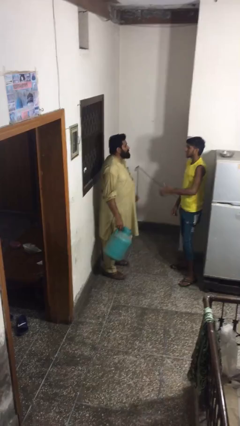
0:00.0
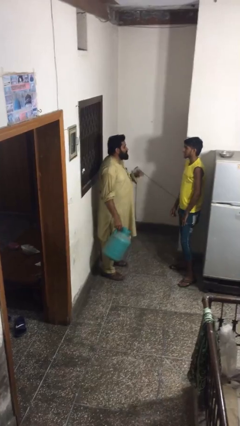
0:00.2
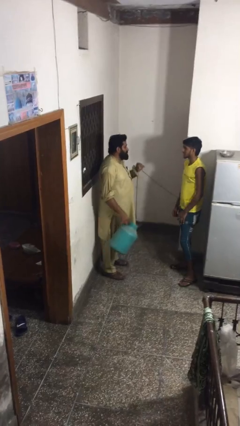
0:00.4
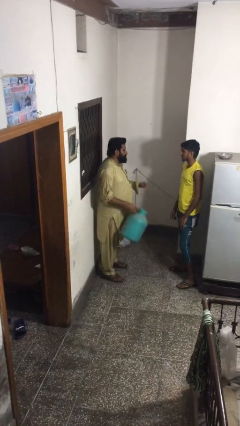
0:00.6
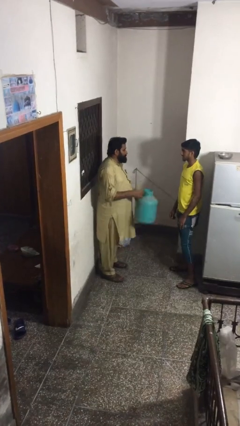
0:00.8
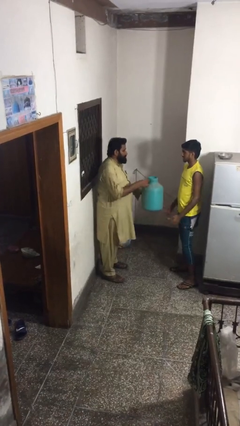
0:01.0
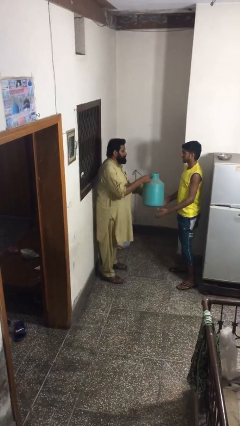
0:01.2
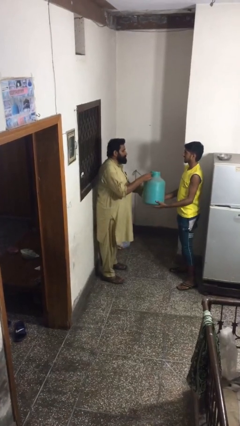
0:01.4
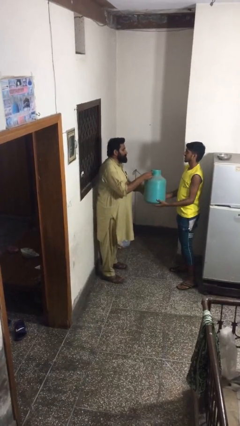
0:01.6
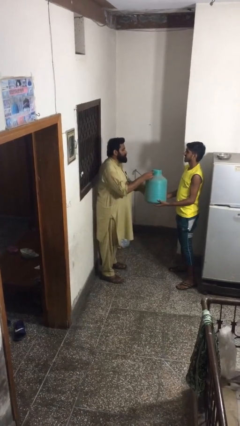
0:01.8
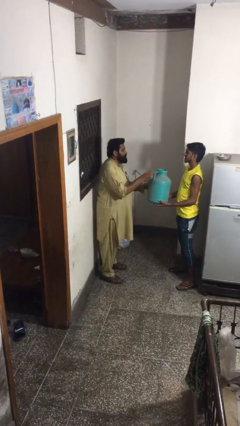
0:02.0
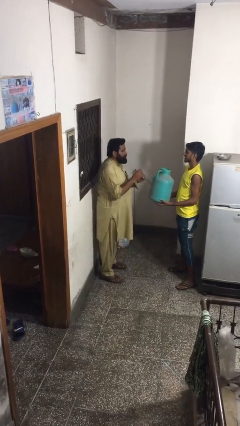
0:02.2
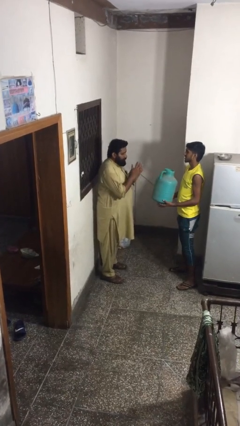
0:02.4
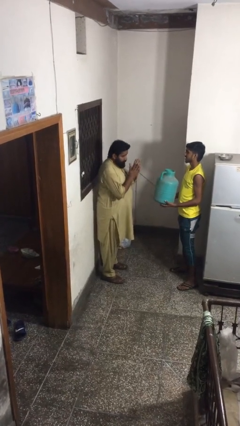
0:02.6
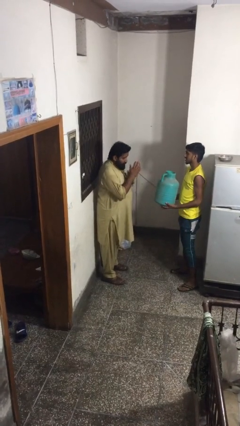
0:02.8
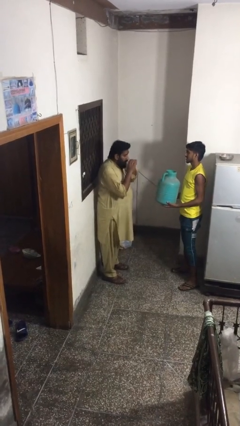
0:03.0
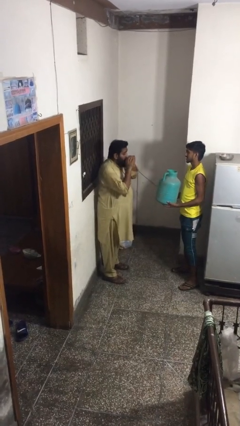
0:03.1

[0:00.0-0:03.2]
person transfers object to person

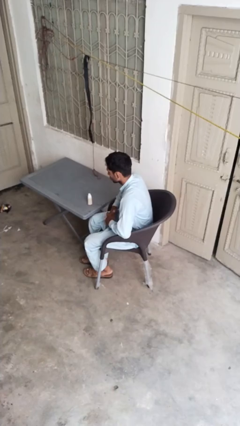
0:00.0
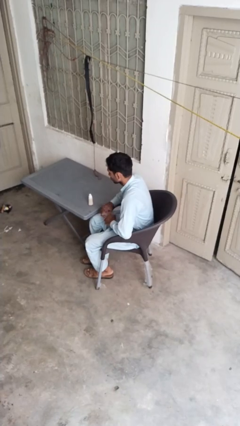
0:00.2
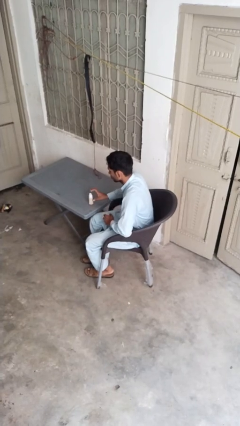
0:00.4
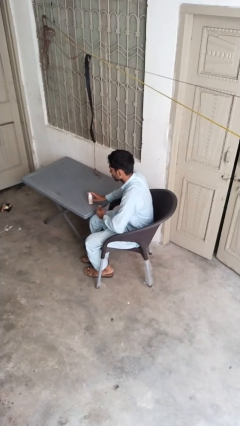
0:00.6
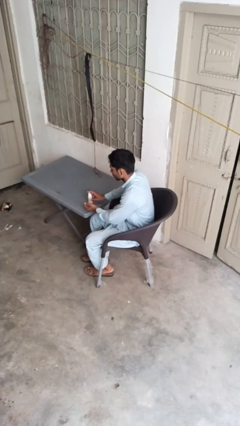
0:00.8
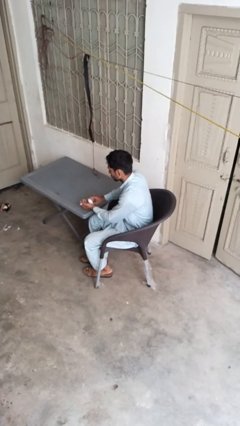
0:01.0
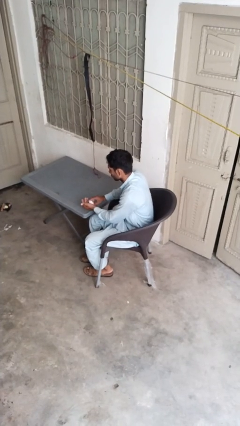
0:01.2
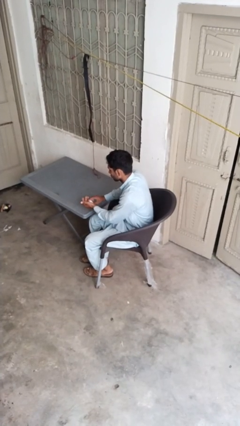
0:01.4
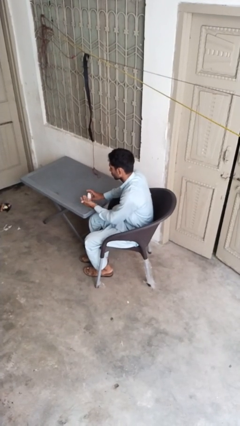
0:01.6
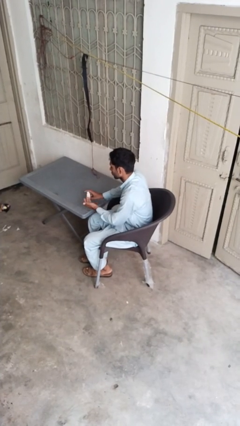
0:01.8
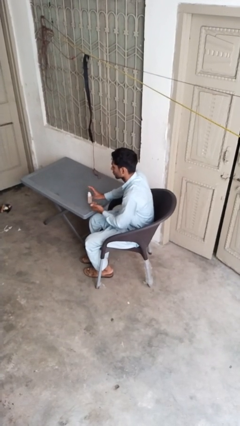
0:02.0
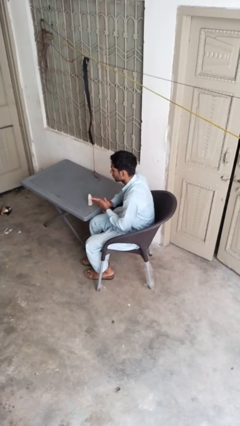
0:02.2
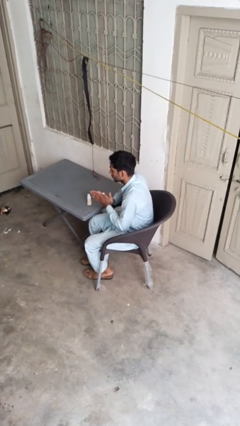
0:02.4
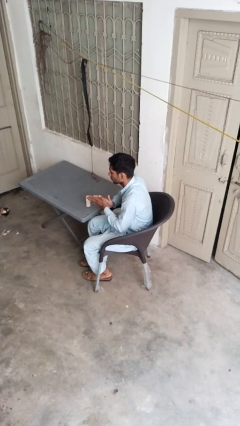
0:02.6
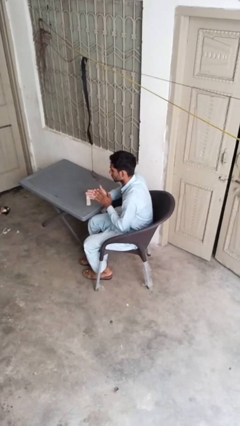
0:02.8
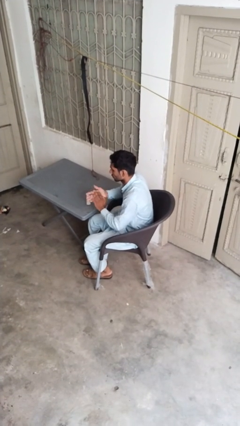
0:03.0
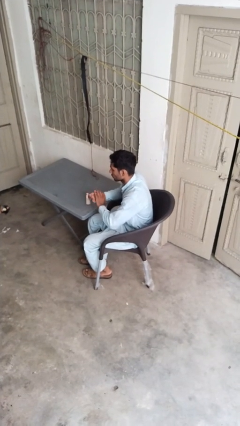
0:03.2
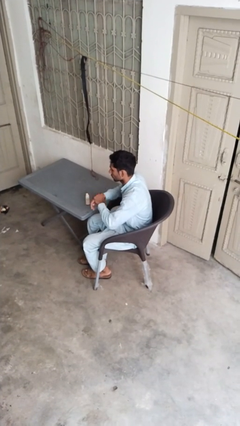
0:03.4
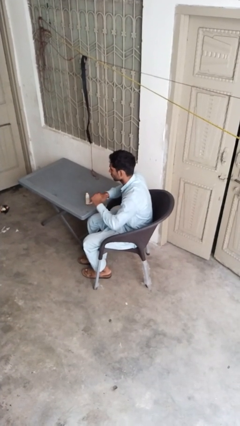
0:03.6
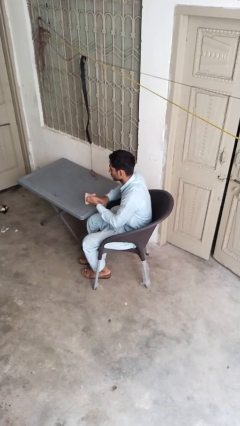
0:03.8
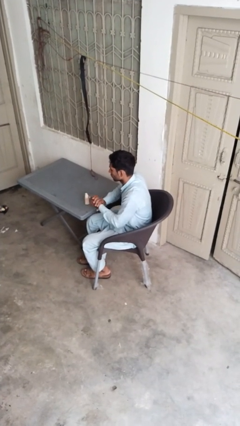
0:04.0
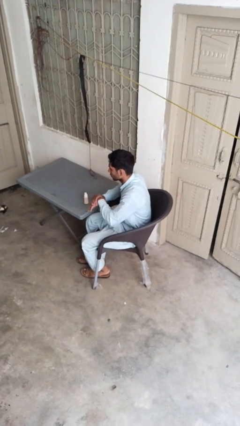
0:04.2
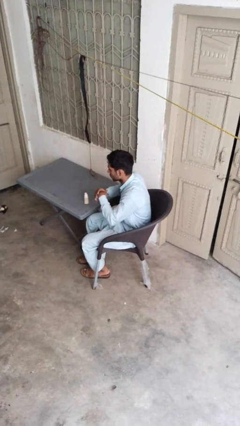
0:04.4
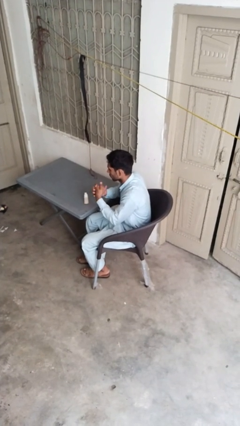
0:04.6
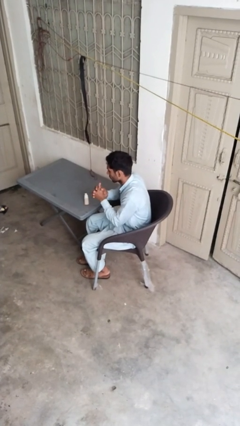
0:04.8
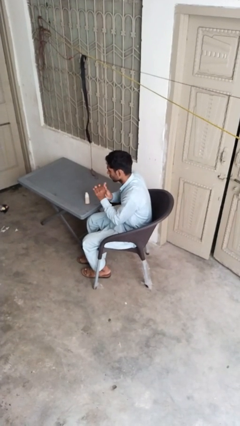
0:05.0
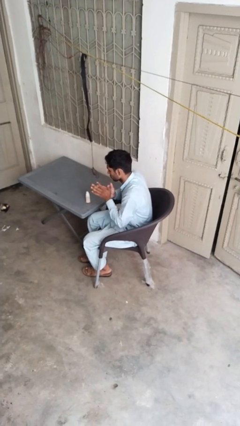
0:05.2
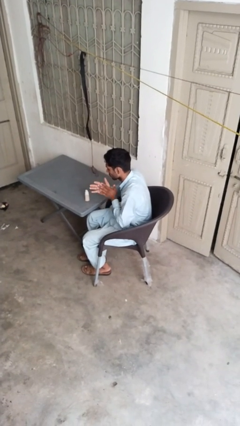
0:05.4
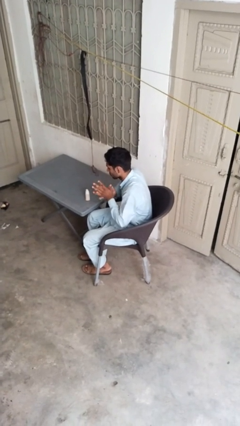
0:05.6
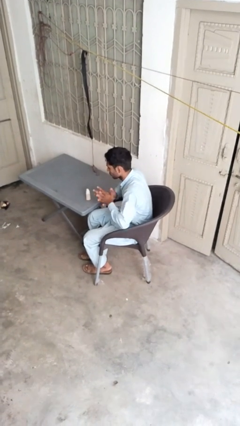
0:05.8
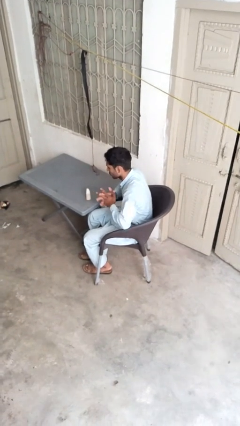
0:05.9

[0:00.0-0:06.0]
person applies facial moisturizer

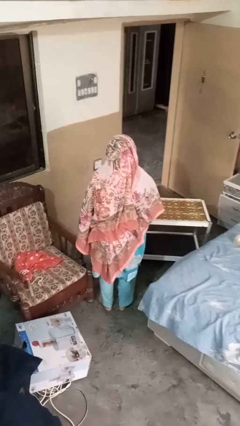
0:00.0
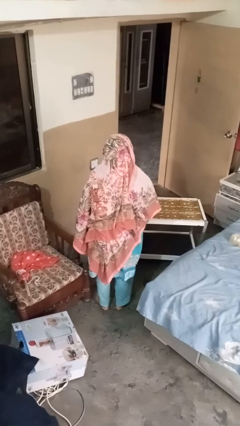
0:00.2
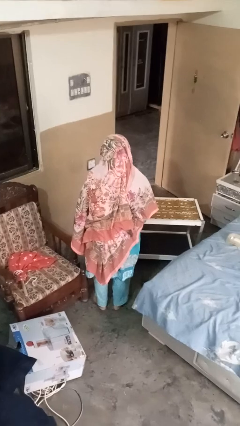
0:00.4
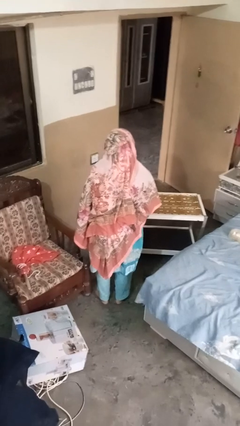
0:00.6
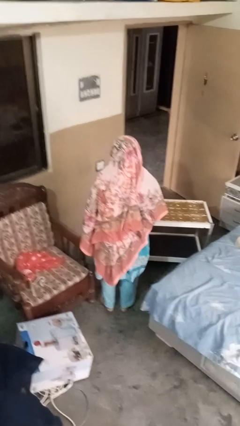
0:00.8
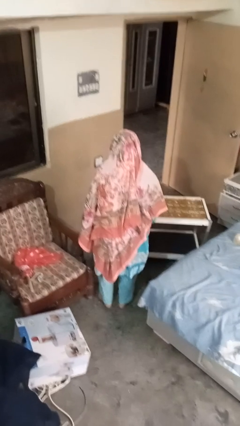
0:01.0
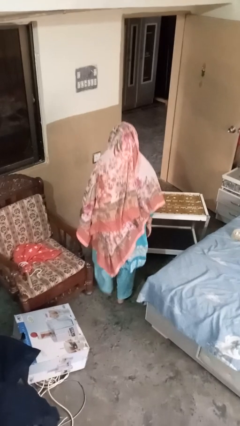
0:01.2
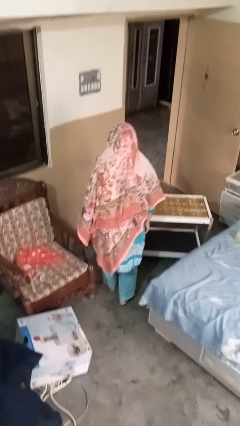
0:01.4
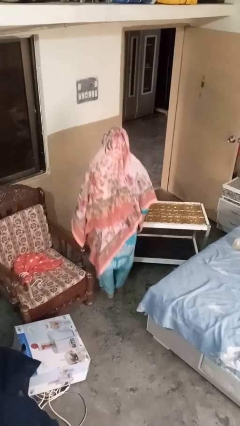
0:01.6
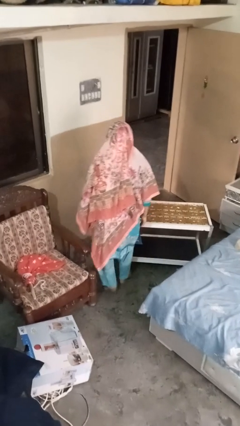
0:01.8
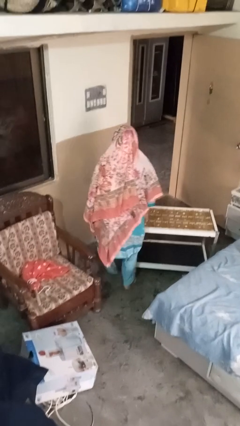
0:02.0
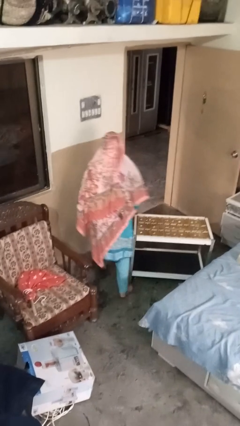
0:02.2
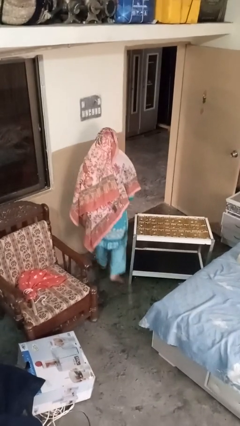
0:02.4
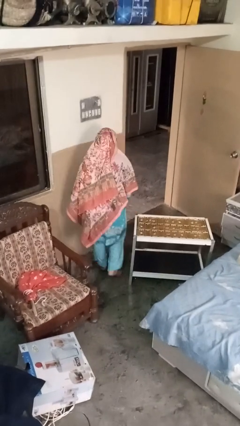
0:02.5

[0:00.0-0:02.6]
person bumps into table

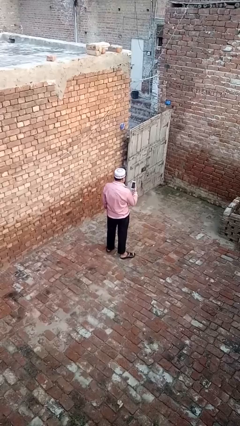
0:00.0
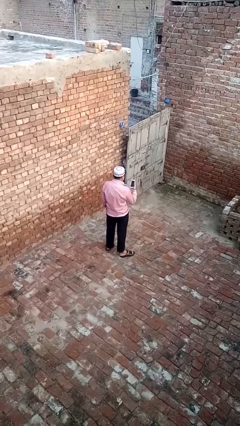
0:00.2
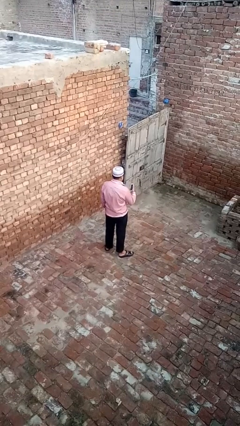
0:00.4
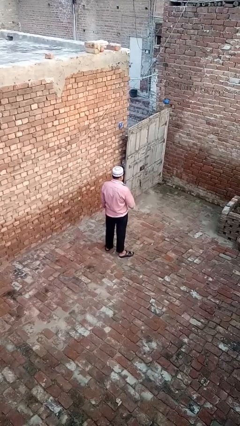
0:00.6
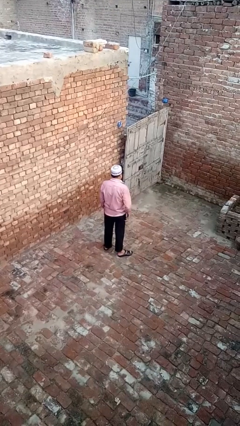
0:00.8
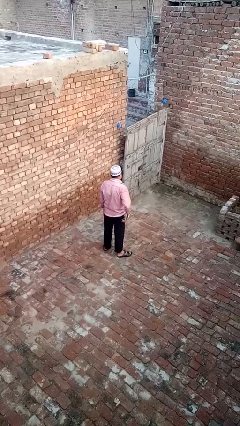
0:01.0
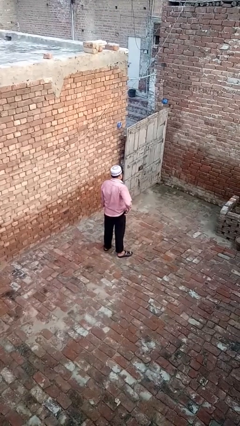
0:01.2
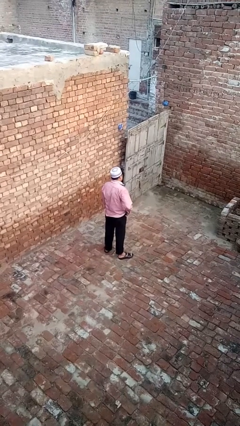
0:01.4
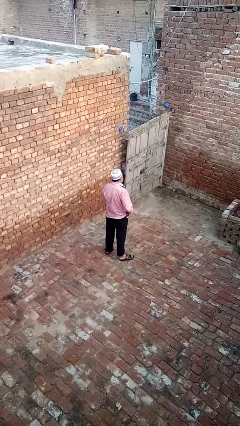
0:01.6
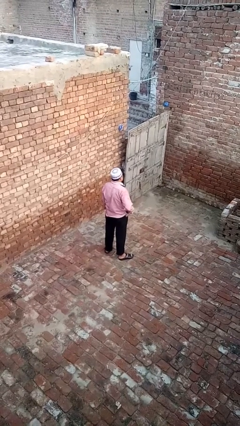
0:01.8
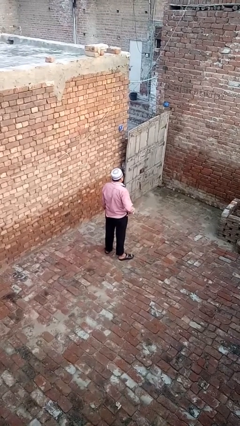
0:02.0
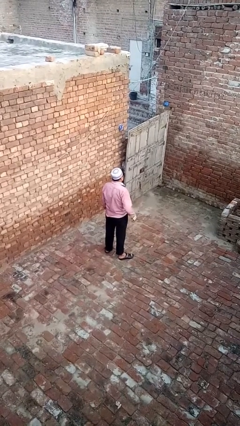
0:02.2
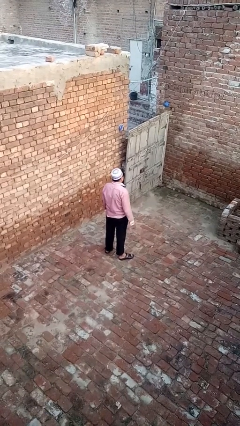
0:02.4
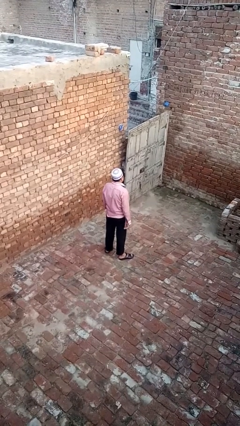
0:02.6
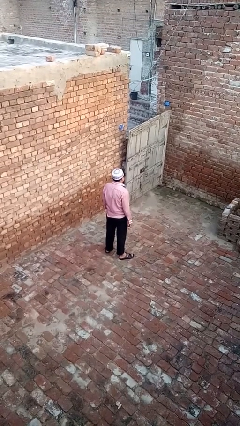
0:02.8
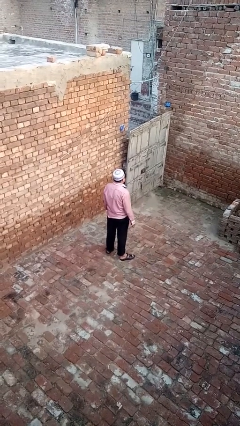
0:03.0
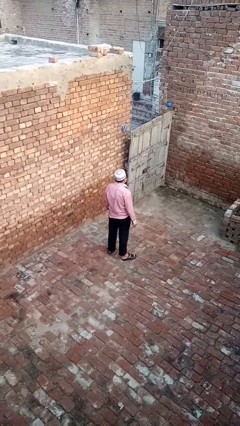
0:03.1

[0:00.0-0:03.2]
person puts phone into pocket

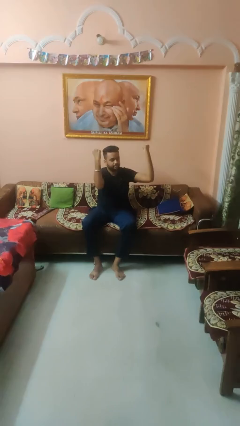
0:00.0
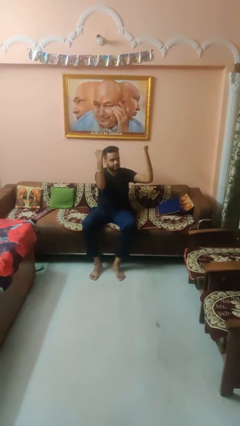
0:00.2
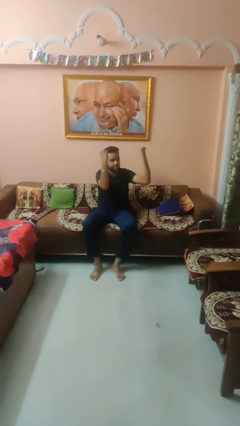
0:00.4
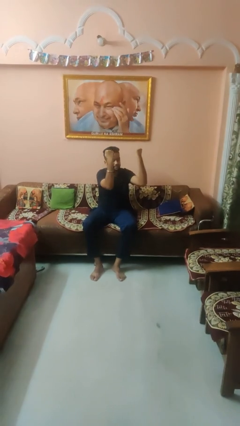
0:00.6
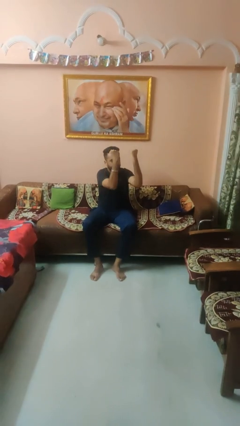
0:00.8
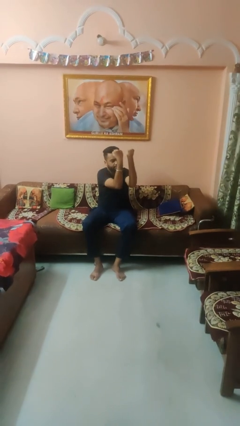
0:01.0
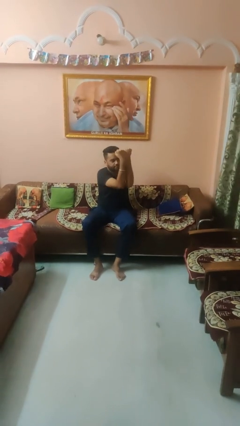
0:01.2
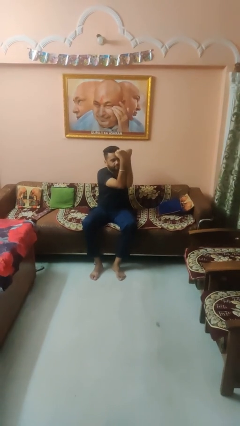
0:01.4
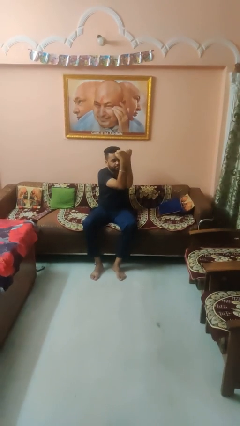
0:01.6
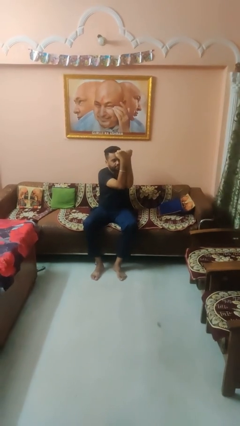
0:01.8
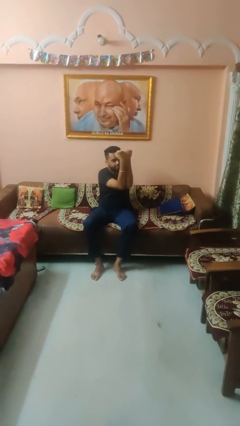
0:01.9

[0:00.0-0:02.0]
person gestures zoom out

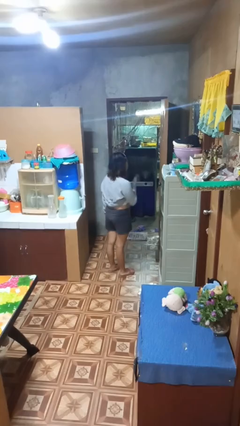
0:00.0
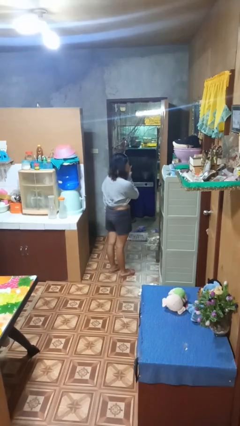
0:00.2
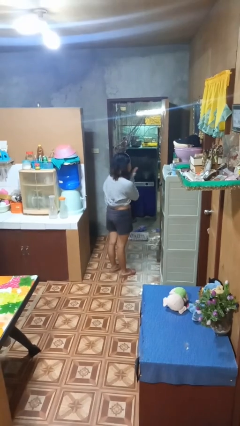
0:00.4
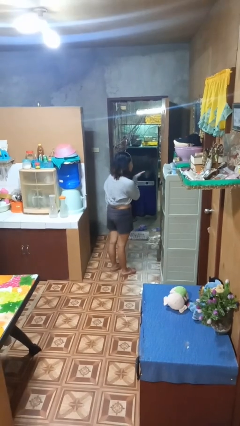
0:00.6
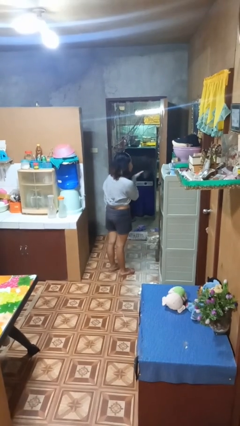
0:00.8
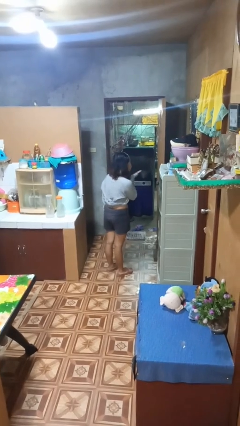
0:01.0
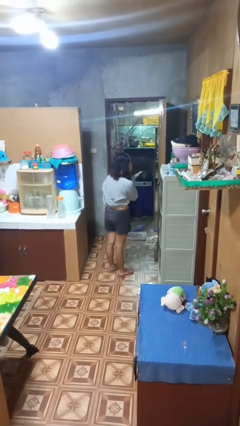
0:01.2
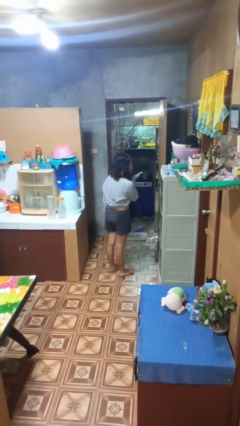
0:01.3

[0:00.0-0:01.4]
person gestures blow kiss
